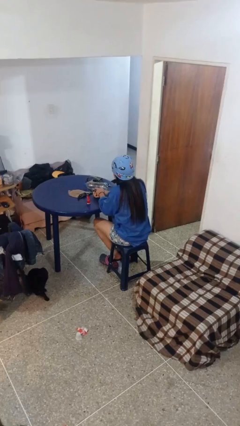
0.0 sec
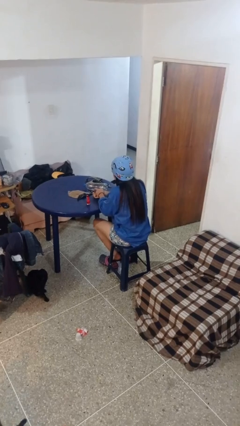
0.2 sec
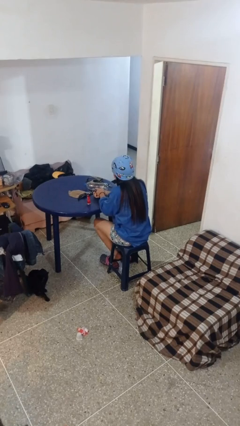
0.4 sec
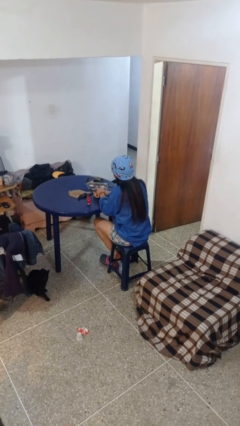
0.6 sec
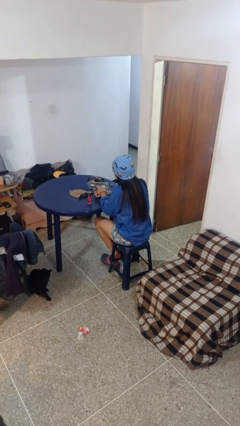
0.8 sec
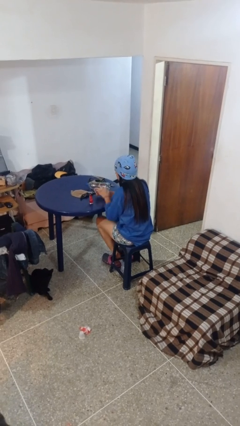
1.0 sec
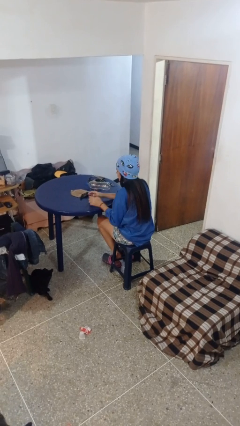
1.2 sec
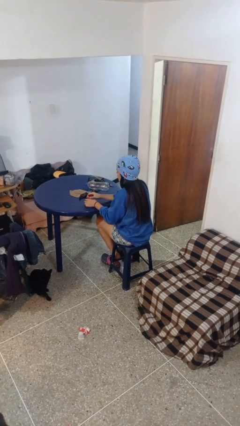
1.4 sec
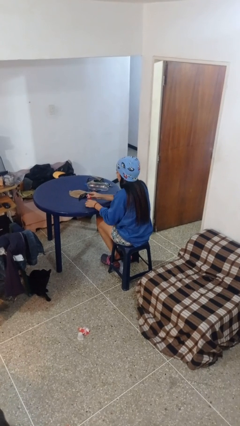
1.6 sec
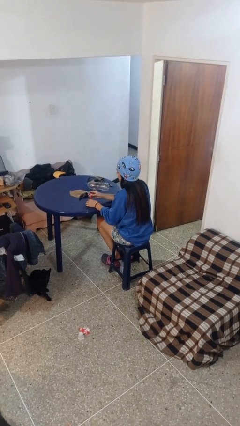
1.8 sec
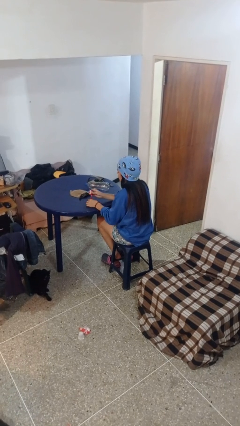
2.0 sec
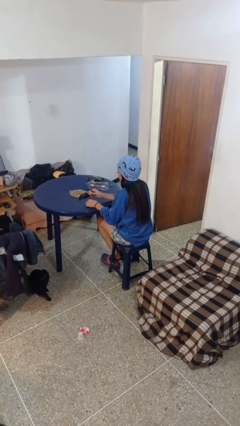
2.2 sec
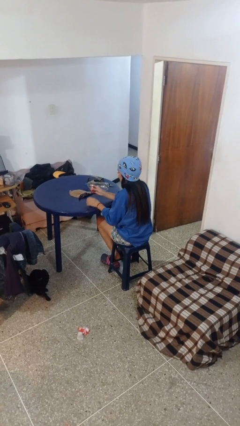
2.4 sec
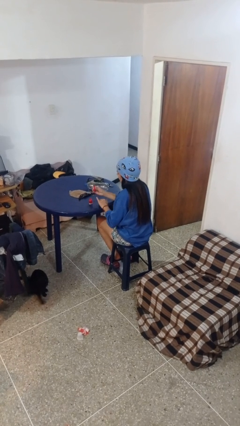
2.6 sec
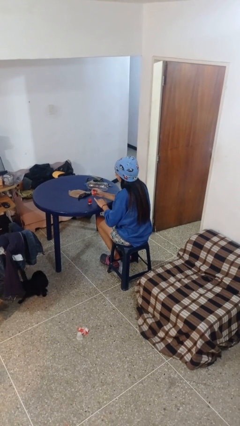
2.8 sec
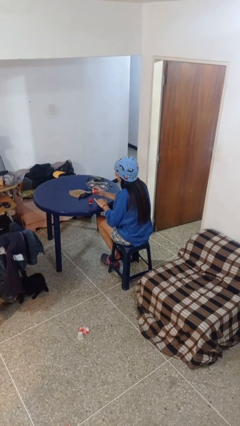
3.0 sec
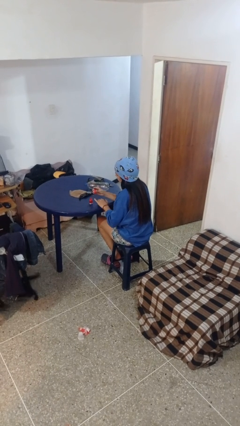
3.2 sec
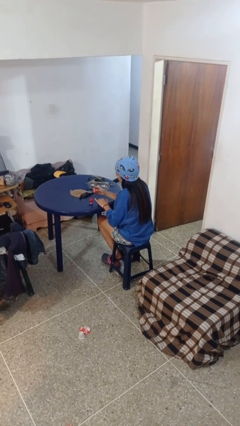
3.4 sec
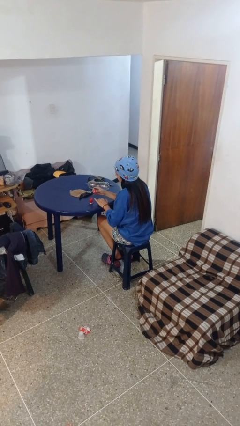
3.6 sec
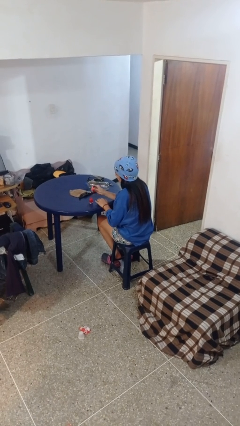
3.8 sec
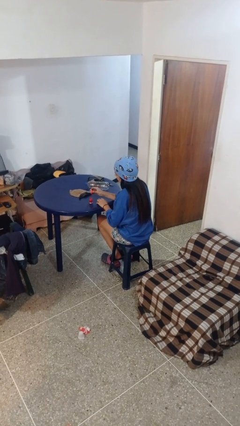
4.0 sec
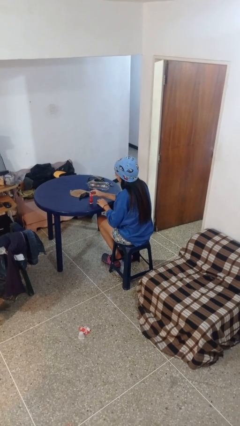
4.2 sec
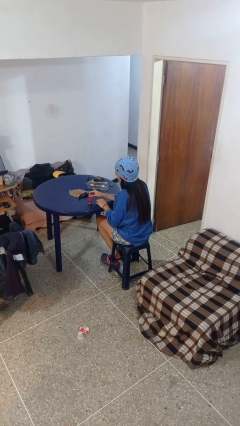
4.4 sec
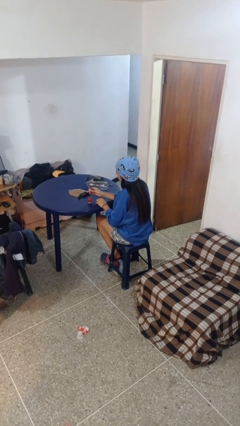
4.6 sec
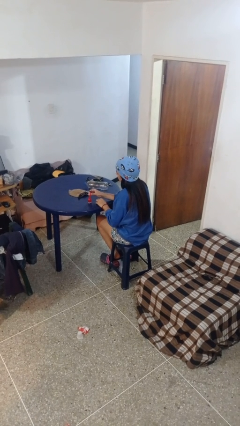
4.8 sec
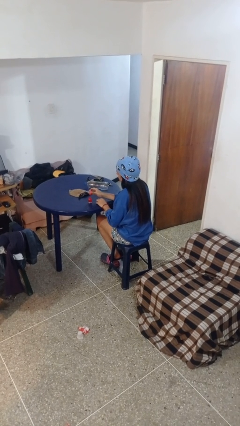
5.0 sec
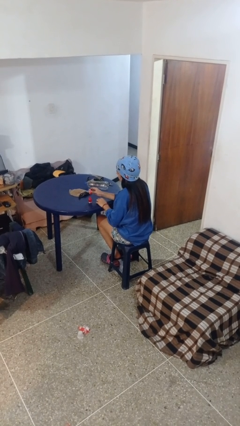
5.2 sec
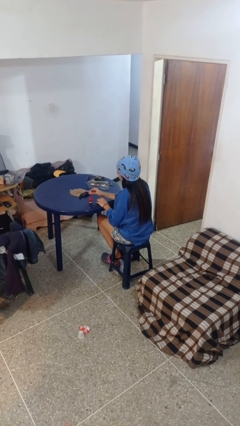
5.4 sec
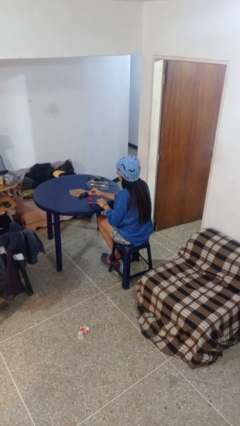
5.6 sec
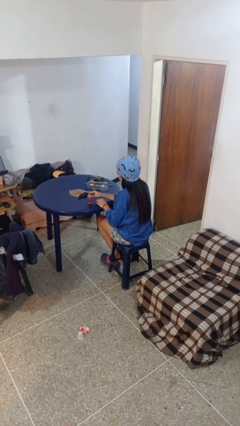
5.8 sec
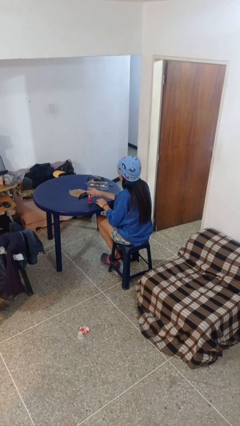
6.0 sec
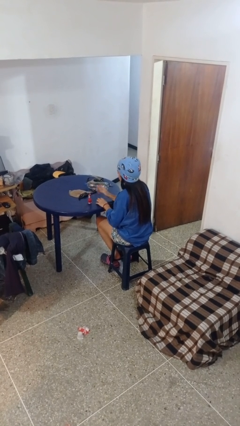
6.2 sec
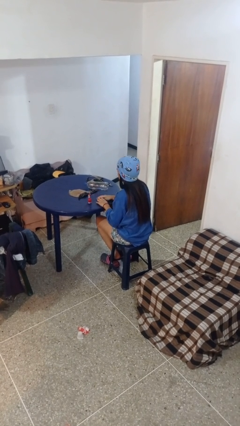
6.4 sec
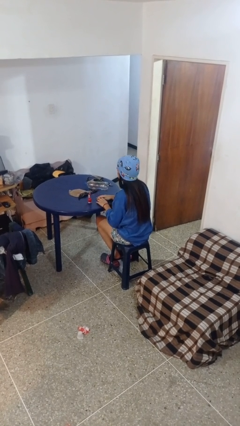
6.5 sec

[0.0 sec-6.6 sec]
person paints fingernails

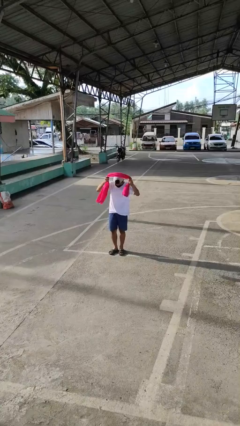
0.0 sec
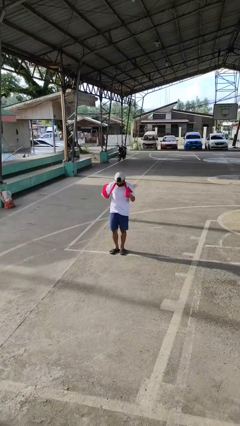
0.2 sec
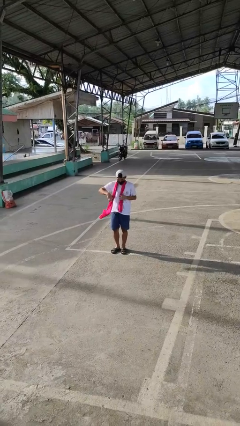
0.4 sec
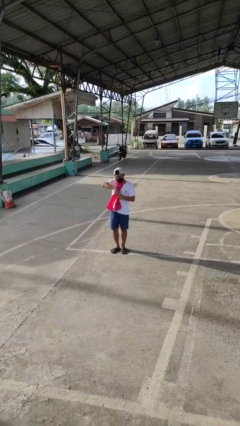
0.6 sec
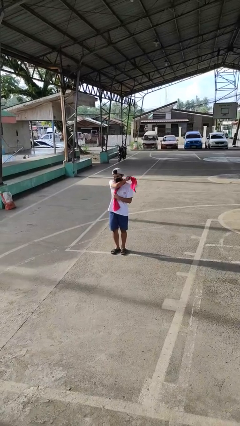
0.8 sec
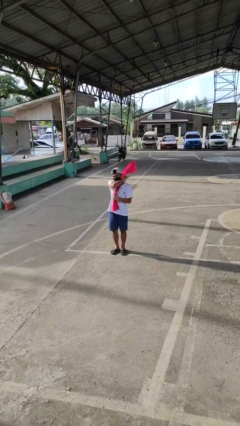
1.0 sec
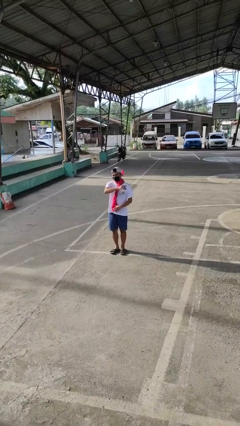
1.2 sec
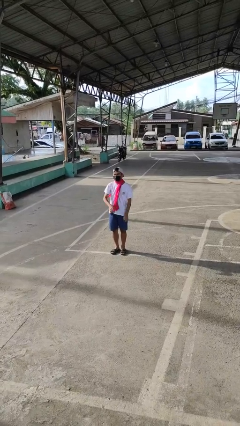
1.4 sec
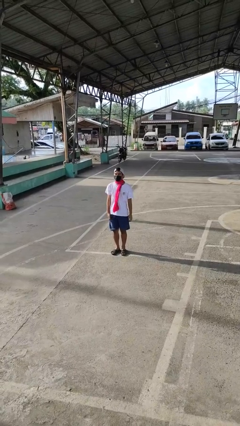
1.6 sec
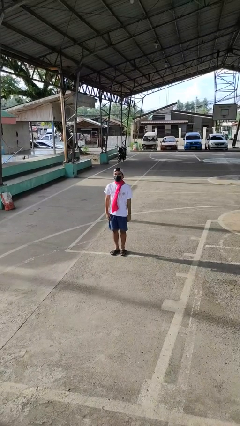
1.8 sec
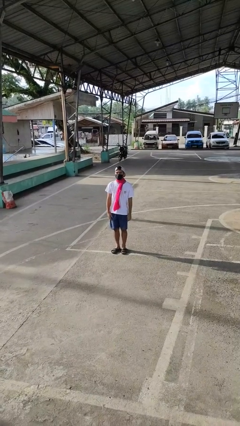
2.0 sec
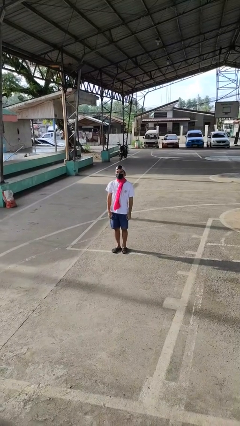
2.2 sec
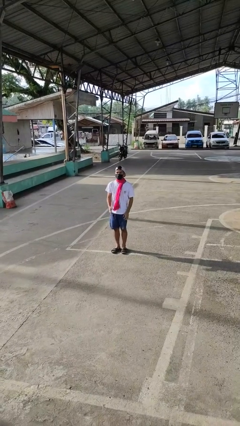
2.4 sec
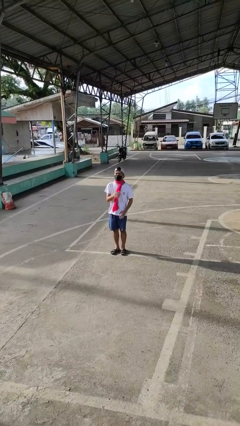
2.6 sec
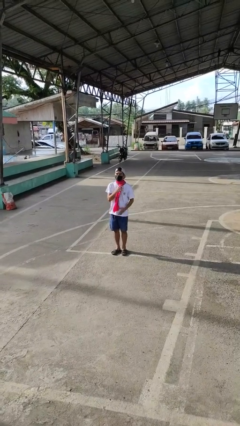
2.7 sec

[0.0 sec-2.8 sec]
person puts on scarf

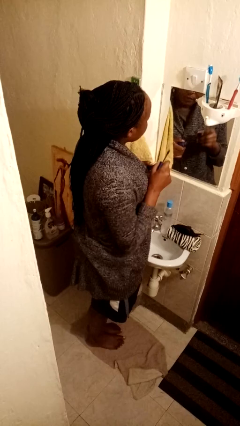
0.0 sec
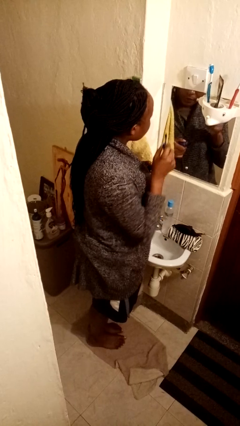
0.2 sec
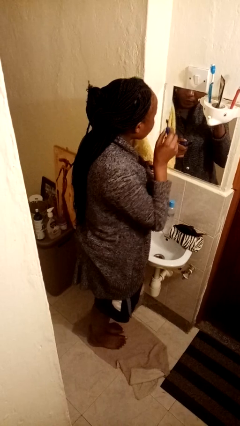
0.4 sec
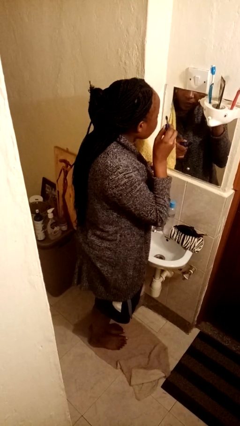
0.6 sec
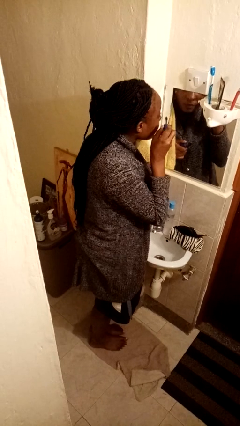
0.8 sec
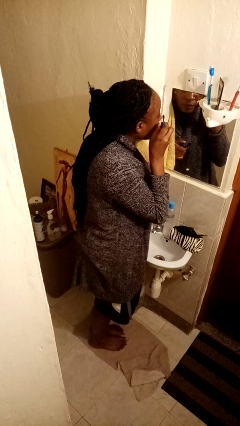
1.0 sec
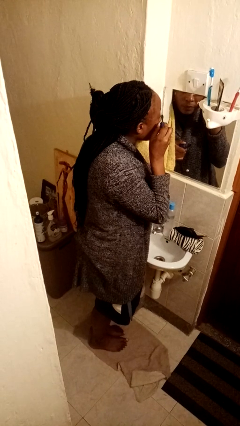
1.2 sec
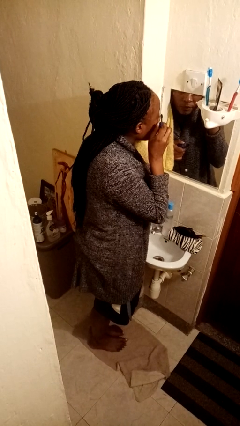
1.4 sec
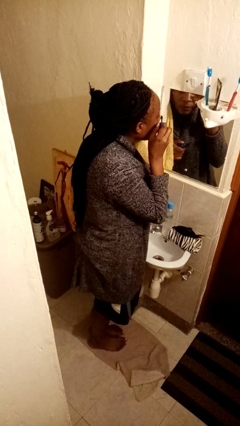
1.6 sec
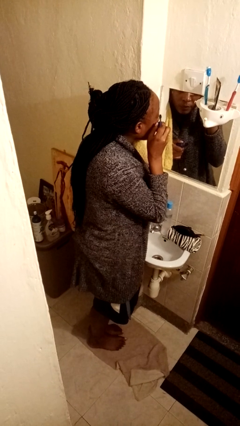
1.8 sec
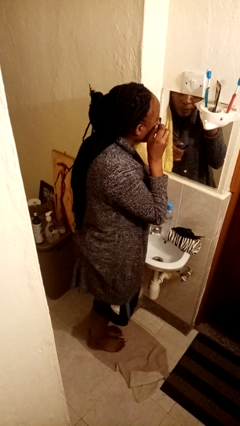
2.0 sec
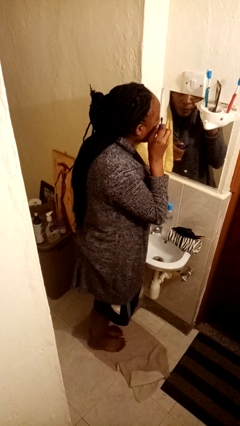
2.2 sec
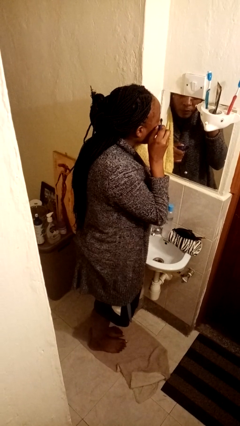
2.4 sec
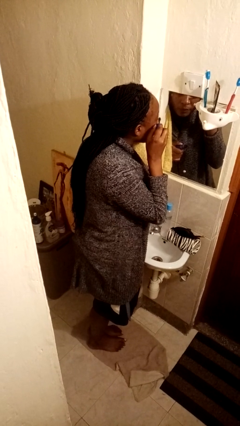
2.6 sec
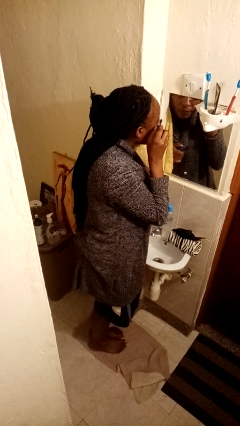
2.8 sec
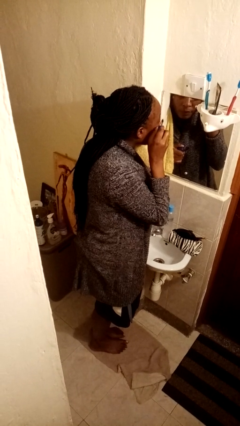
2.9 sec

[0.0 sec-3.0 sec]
person applies eye makeup

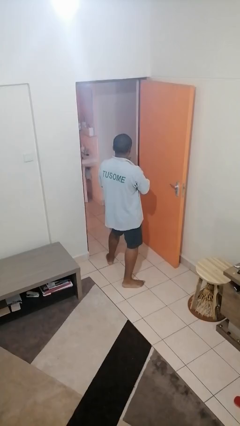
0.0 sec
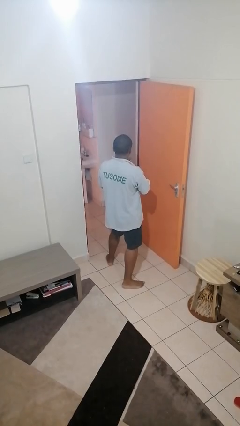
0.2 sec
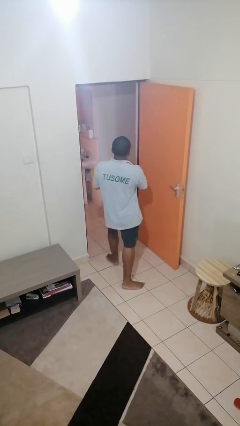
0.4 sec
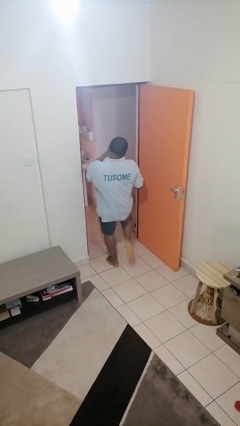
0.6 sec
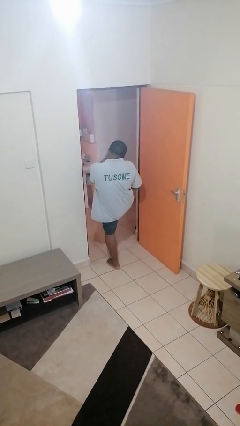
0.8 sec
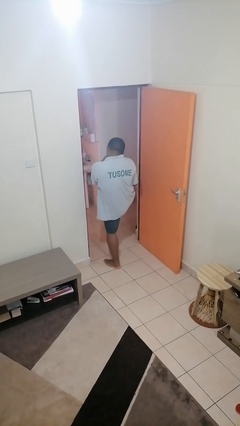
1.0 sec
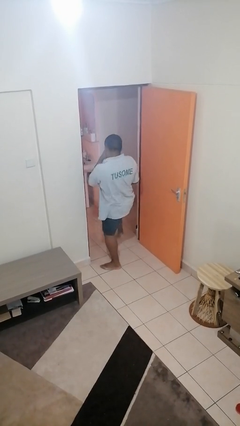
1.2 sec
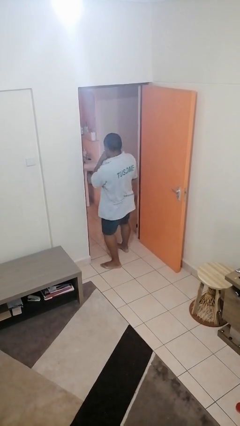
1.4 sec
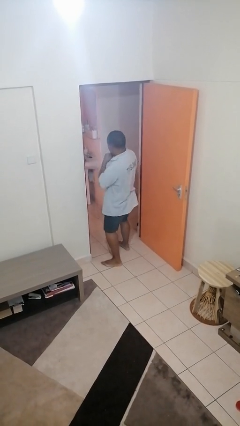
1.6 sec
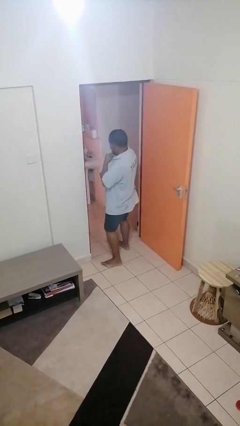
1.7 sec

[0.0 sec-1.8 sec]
person karate kicks

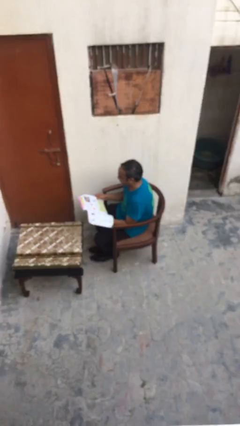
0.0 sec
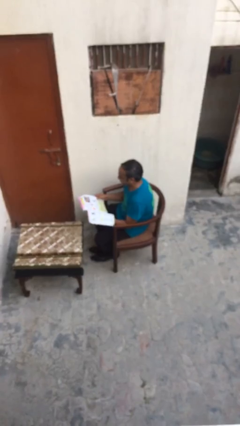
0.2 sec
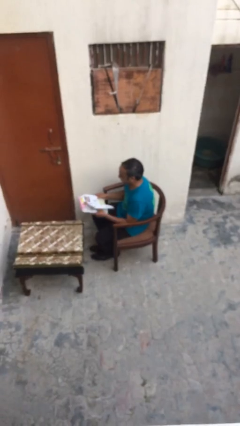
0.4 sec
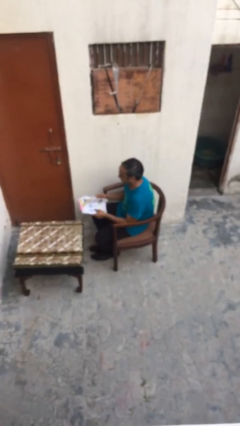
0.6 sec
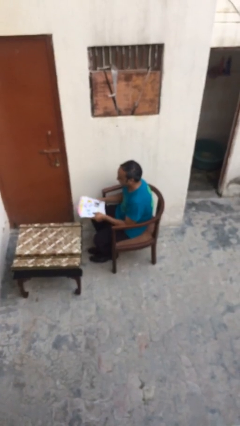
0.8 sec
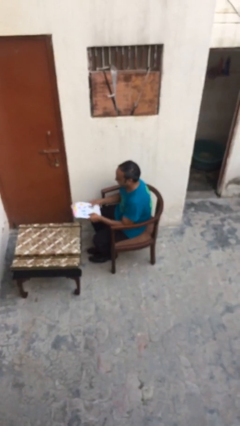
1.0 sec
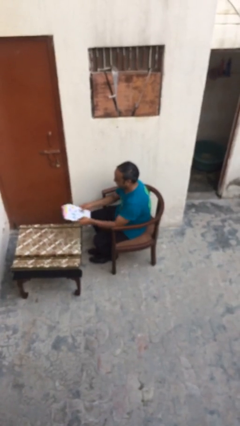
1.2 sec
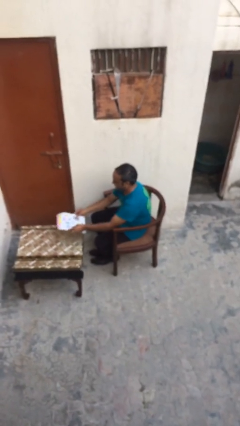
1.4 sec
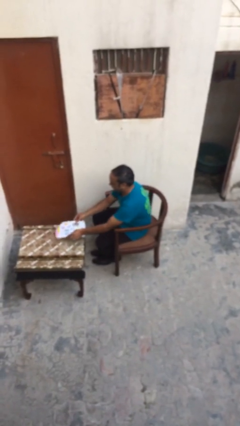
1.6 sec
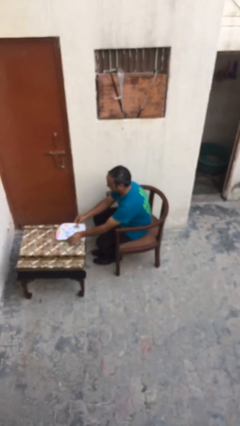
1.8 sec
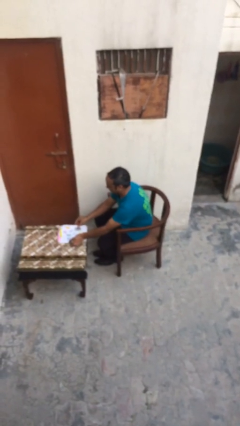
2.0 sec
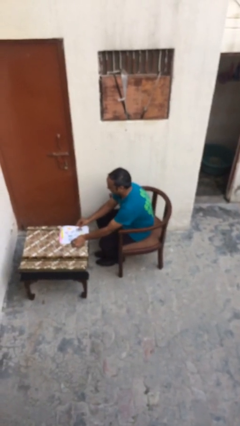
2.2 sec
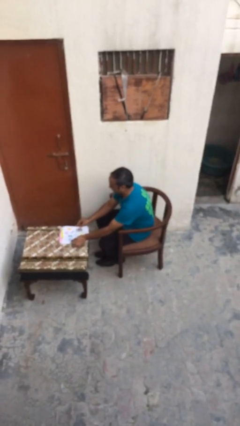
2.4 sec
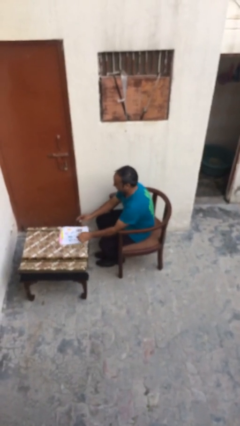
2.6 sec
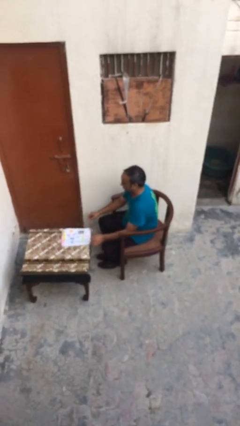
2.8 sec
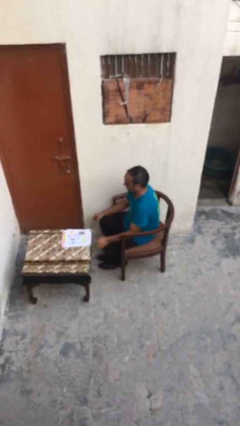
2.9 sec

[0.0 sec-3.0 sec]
person puts down object on table

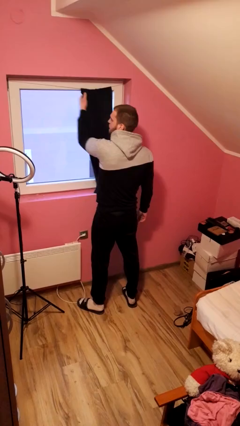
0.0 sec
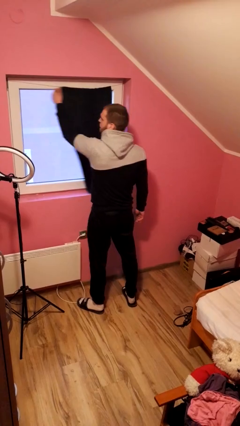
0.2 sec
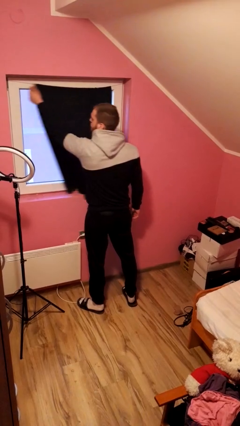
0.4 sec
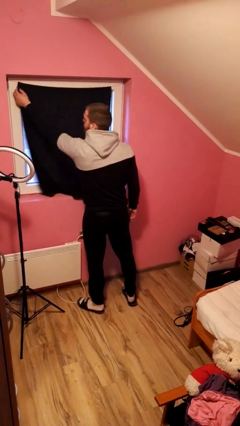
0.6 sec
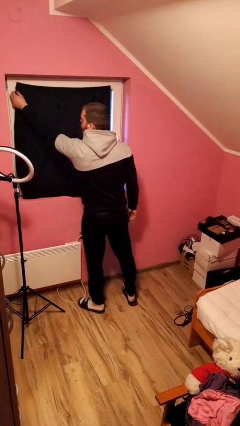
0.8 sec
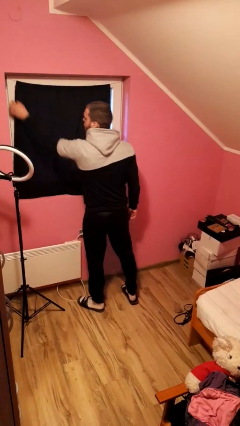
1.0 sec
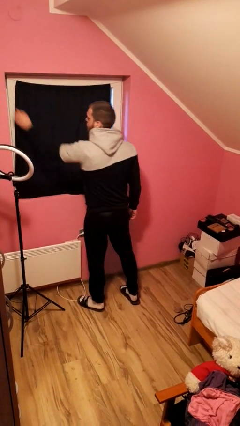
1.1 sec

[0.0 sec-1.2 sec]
person closes curtains
